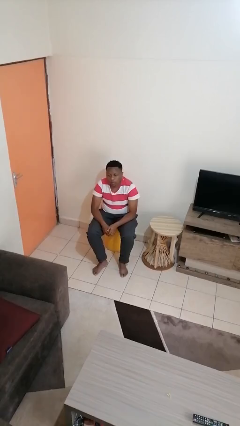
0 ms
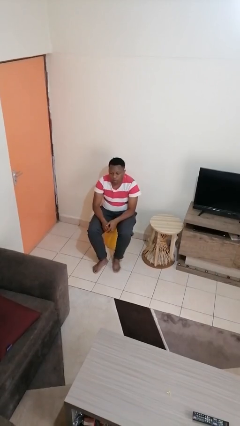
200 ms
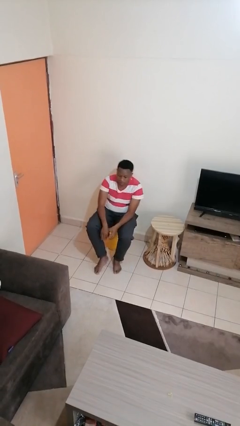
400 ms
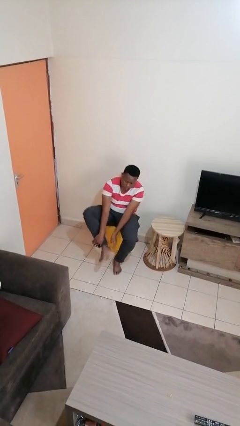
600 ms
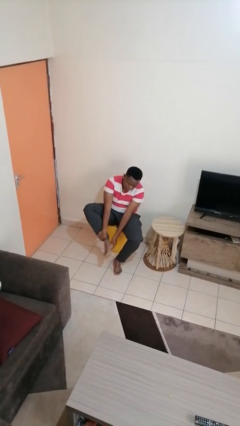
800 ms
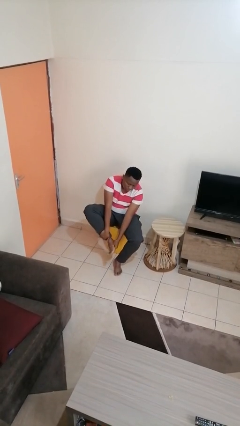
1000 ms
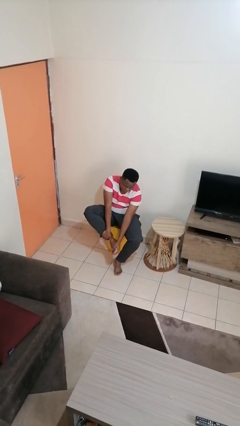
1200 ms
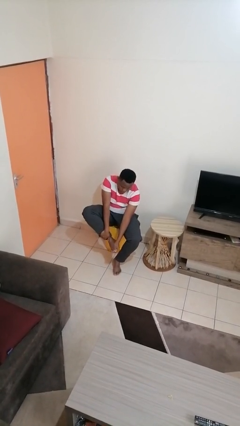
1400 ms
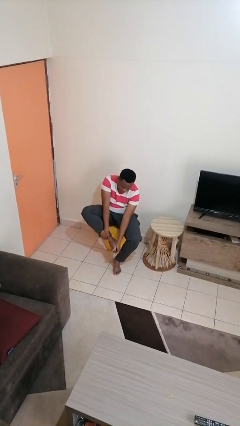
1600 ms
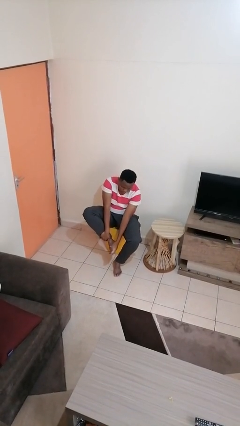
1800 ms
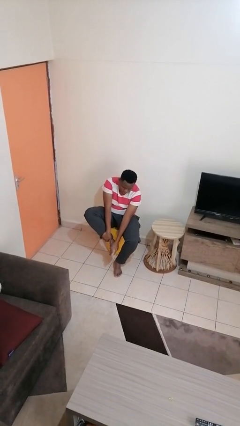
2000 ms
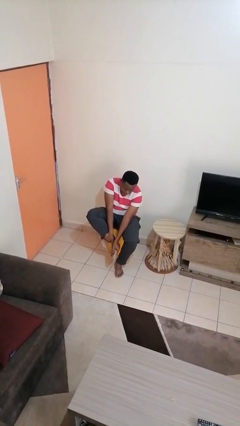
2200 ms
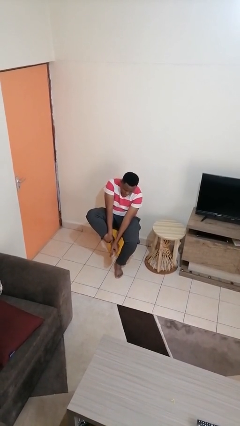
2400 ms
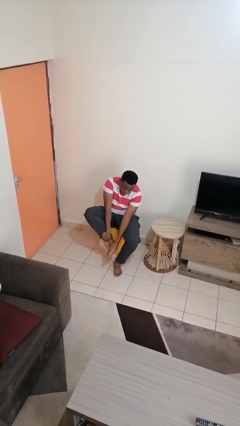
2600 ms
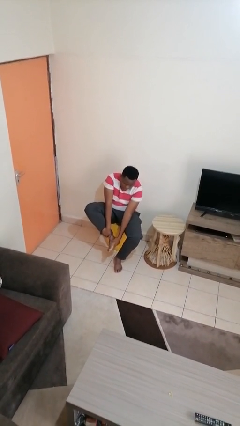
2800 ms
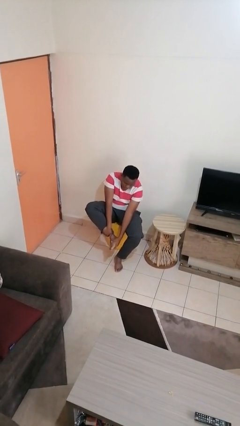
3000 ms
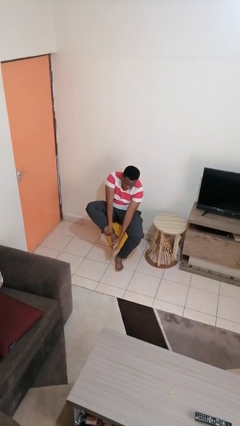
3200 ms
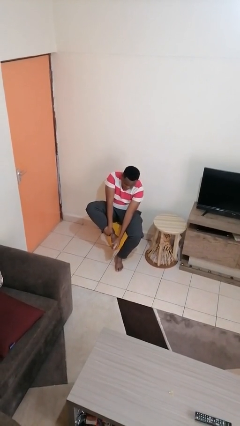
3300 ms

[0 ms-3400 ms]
person rubs foot

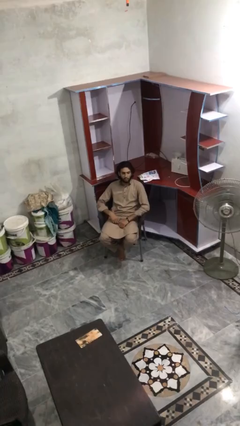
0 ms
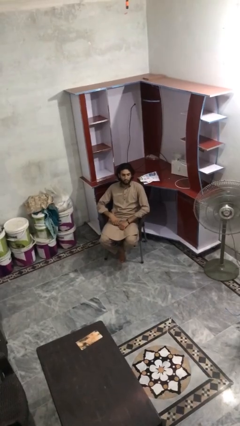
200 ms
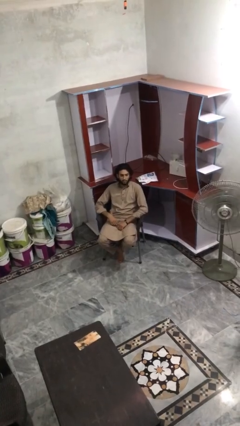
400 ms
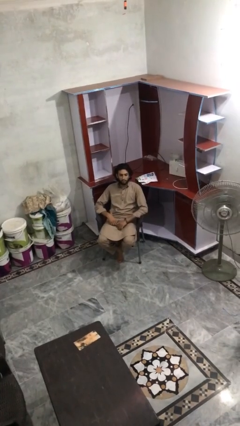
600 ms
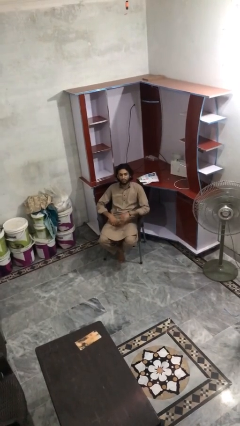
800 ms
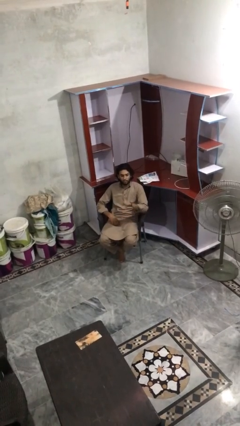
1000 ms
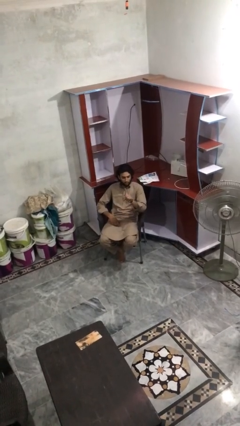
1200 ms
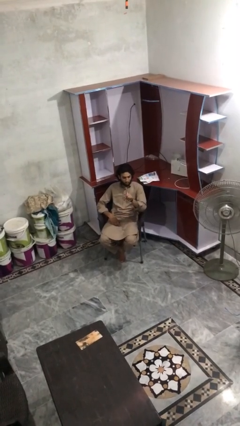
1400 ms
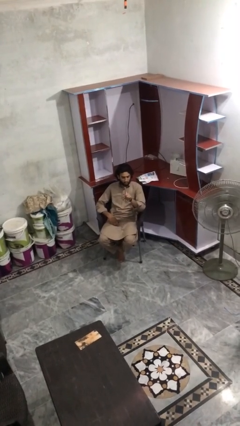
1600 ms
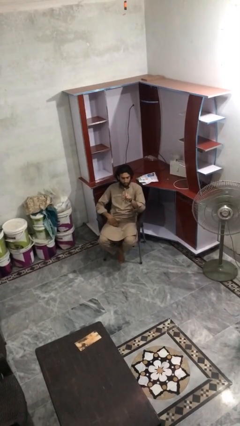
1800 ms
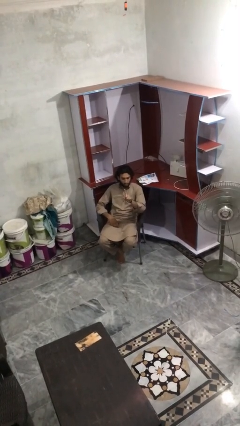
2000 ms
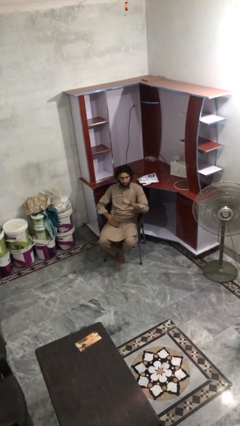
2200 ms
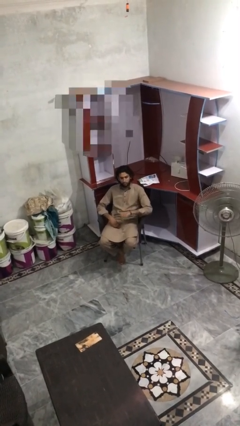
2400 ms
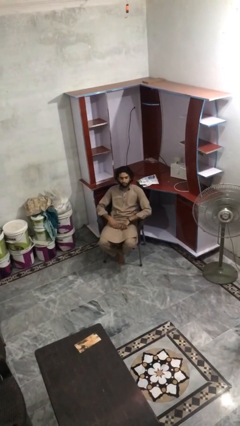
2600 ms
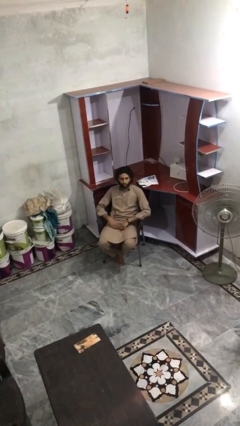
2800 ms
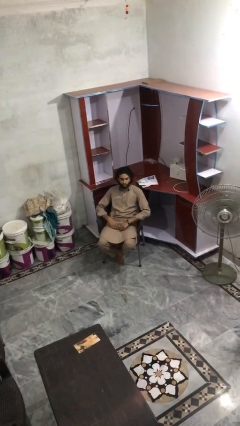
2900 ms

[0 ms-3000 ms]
person gestures number one

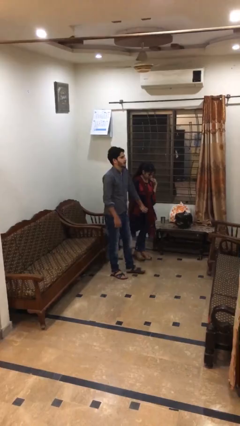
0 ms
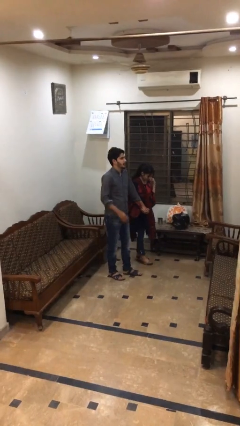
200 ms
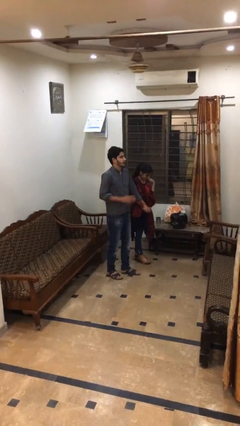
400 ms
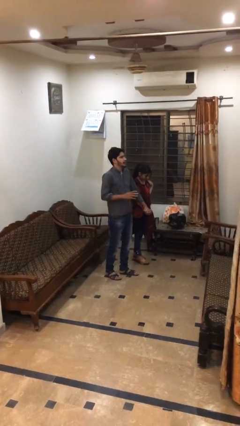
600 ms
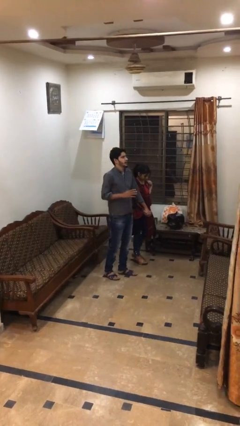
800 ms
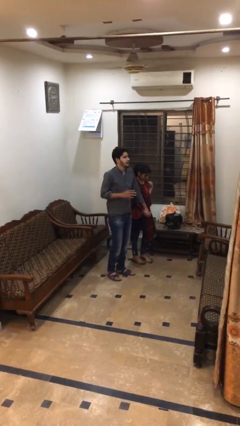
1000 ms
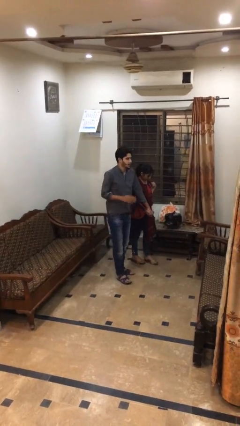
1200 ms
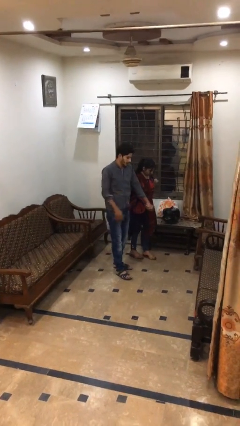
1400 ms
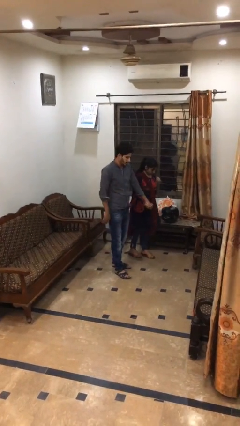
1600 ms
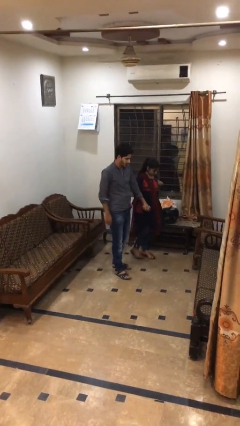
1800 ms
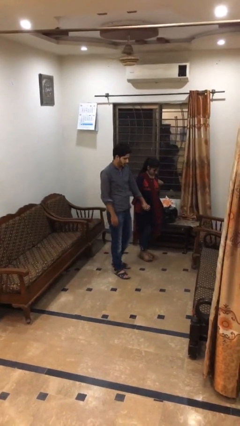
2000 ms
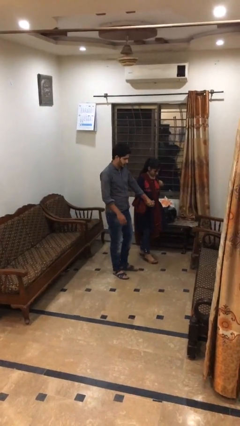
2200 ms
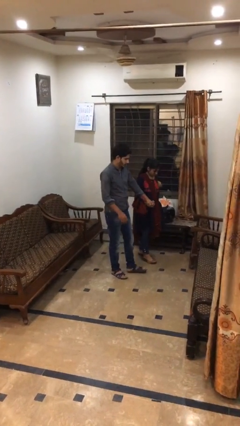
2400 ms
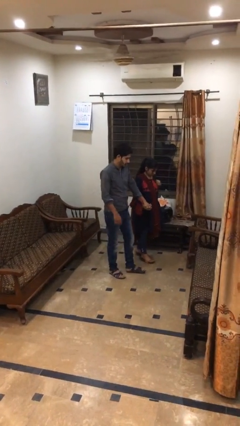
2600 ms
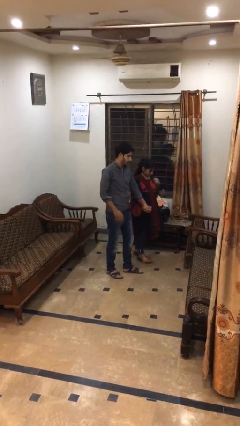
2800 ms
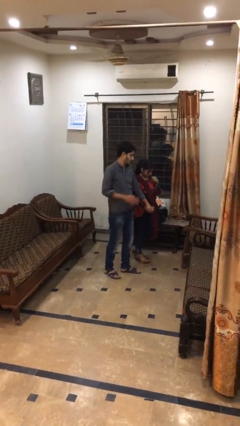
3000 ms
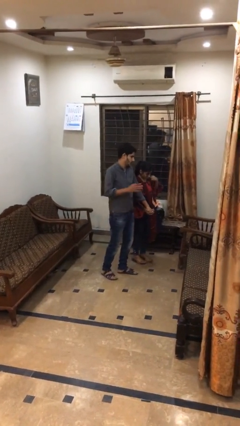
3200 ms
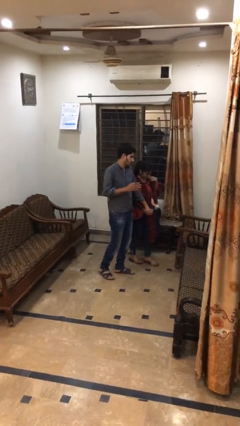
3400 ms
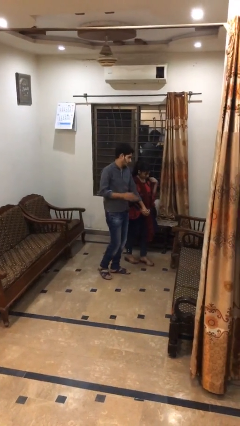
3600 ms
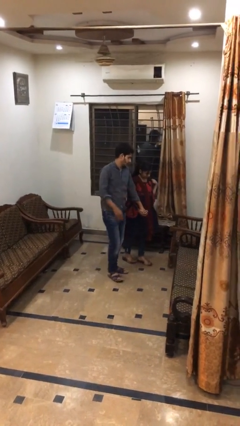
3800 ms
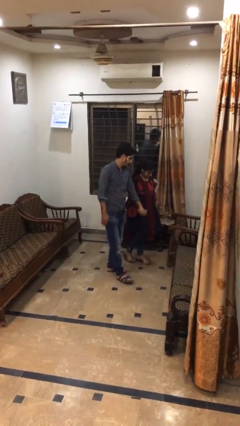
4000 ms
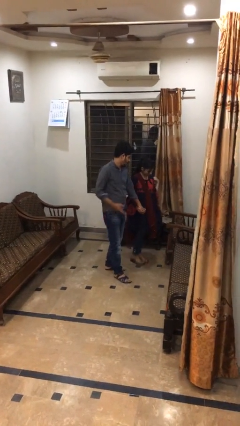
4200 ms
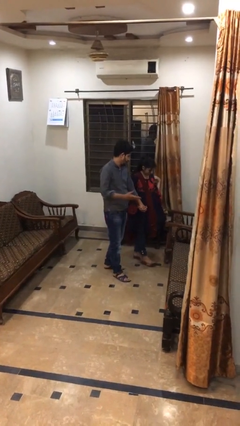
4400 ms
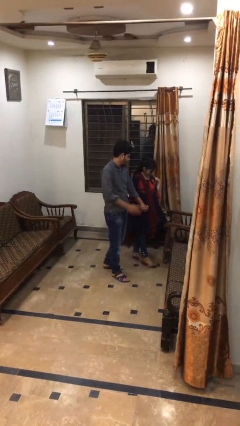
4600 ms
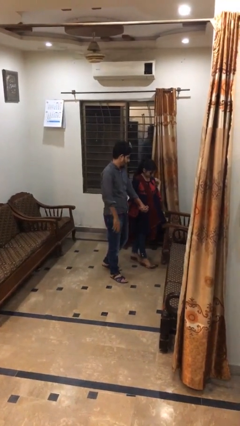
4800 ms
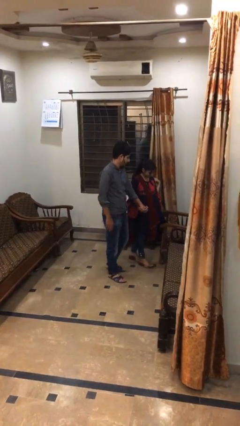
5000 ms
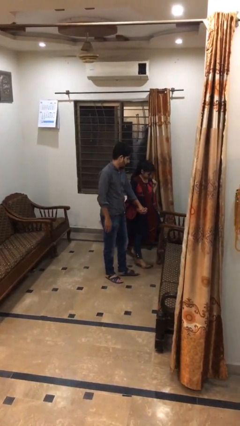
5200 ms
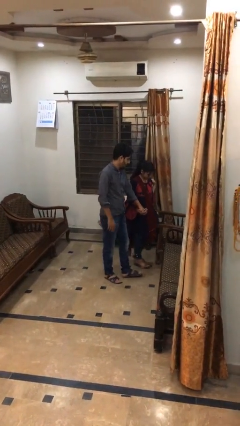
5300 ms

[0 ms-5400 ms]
person holds hand

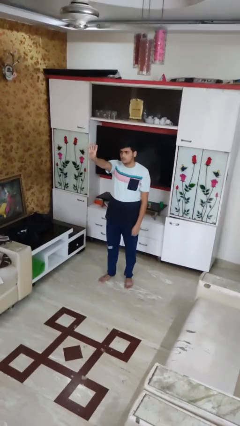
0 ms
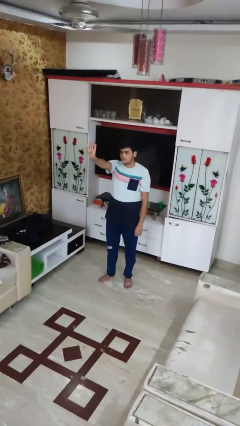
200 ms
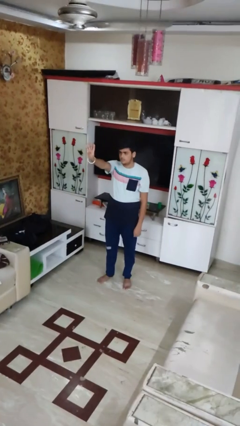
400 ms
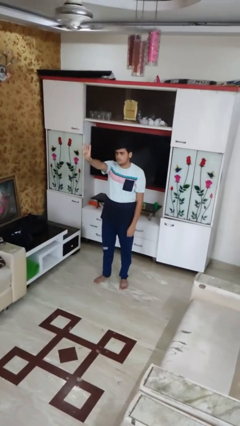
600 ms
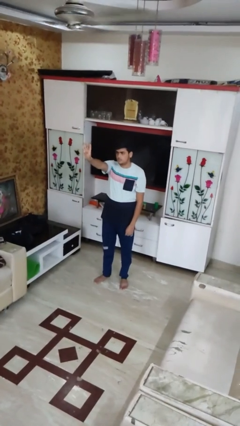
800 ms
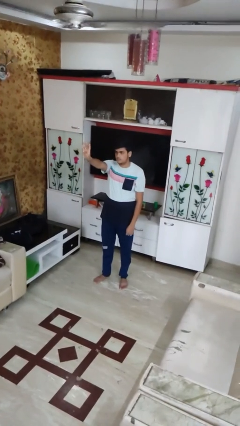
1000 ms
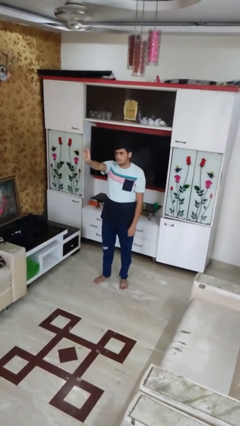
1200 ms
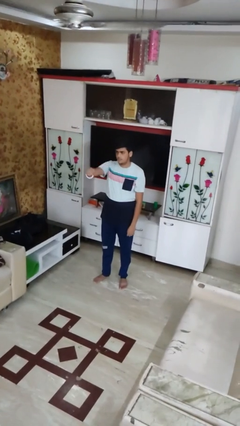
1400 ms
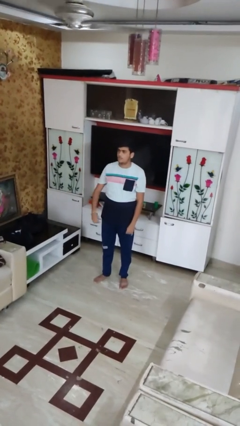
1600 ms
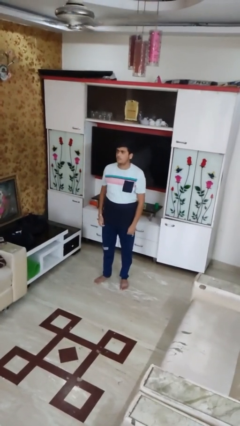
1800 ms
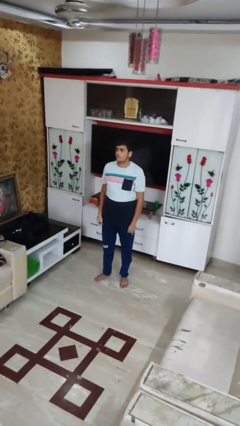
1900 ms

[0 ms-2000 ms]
person gestures number four

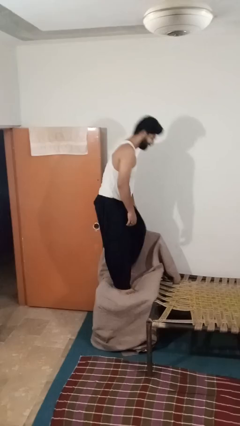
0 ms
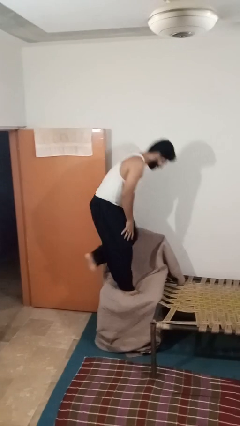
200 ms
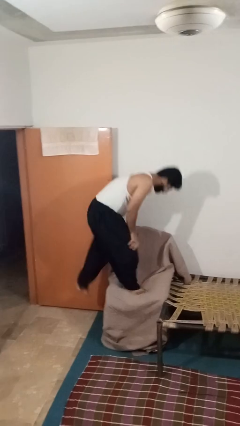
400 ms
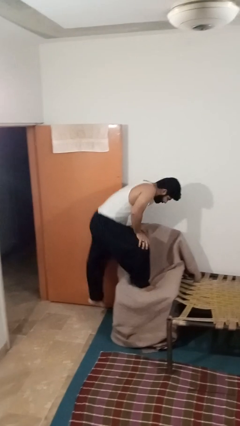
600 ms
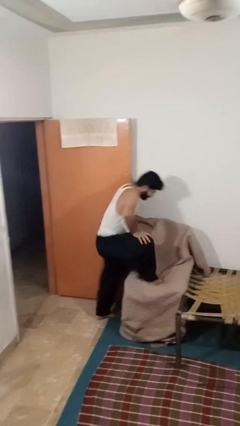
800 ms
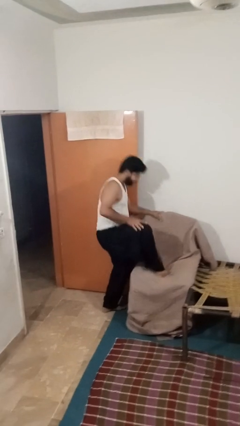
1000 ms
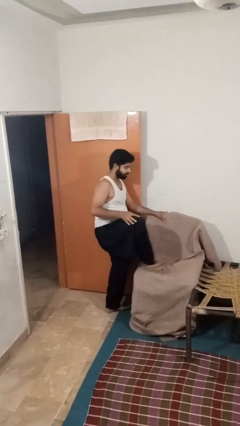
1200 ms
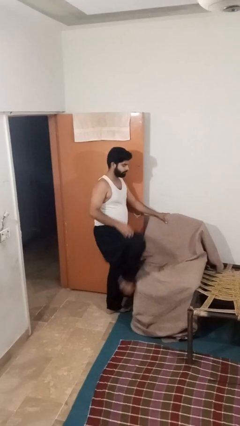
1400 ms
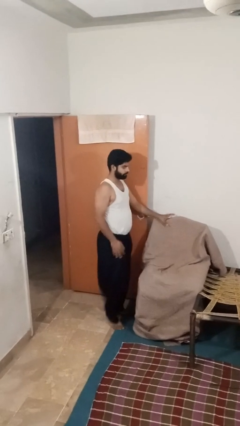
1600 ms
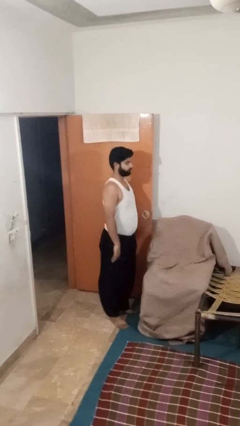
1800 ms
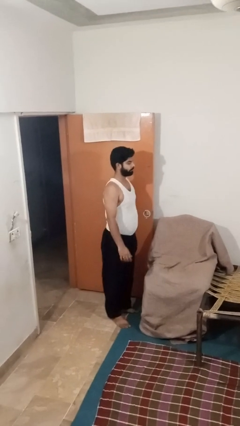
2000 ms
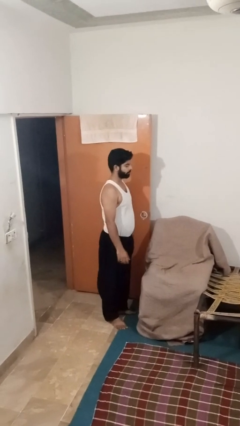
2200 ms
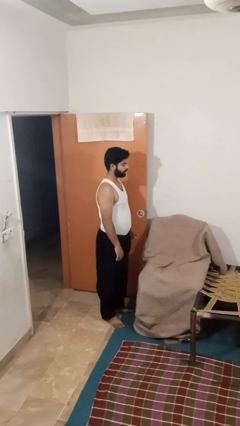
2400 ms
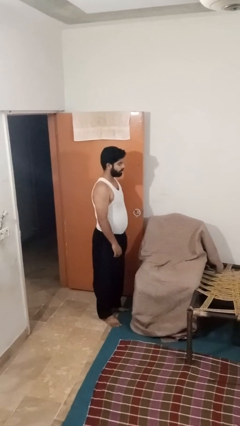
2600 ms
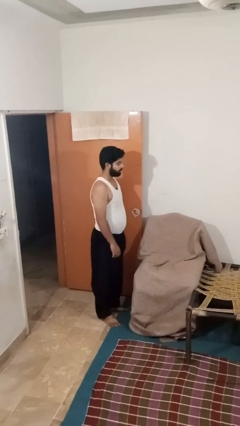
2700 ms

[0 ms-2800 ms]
person climbs off couch

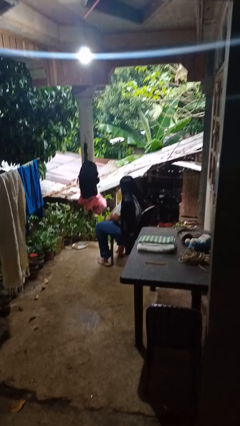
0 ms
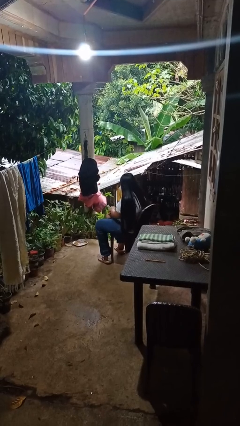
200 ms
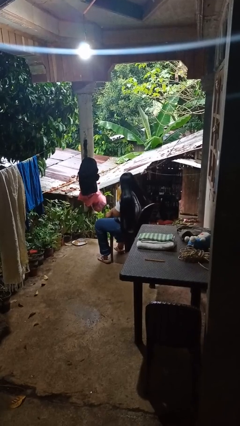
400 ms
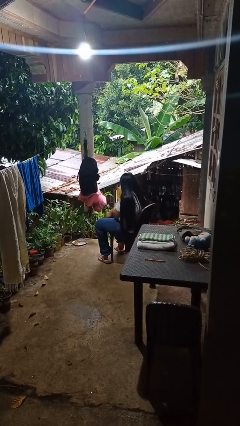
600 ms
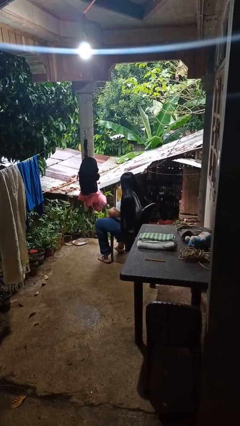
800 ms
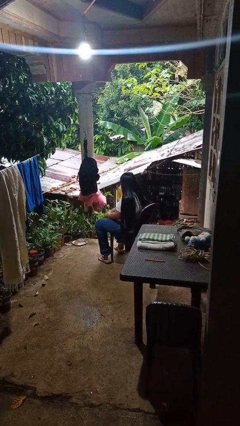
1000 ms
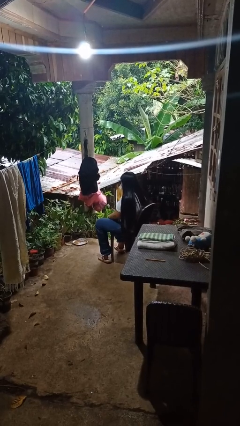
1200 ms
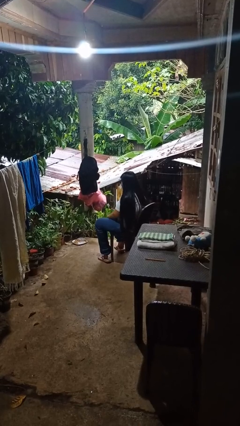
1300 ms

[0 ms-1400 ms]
person swats bug
